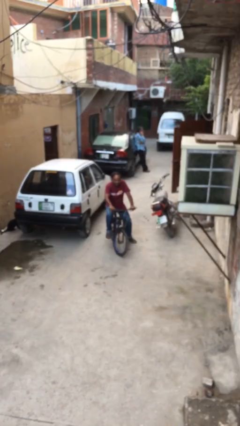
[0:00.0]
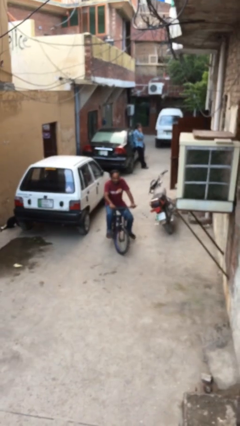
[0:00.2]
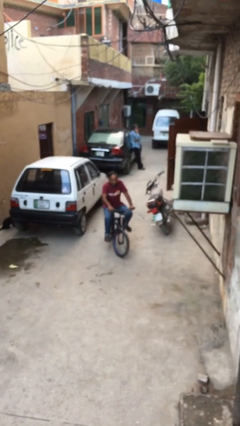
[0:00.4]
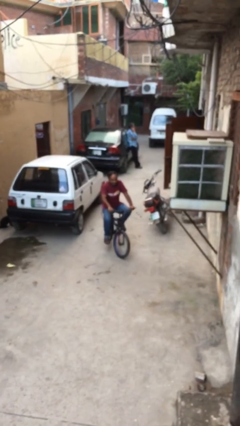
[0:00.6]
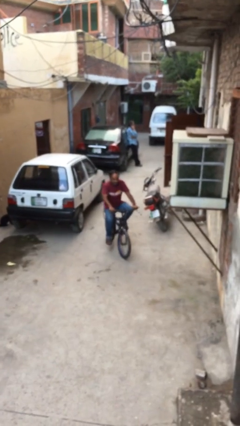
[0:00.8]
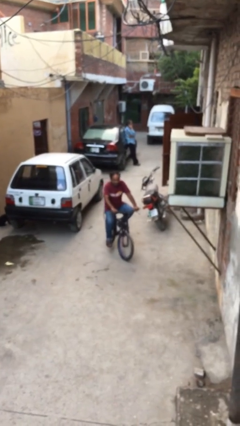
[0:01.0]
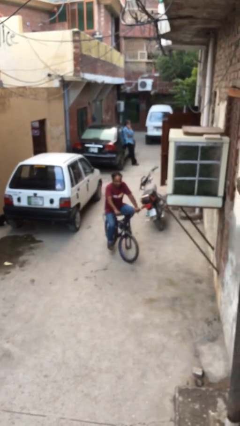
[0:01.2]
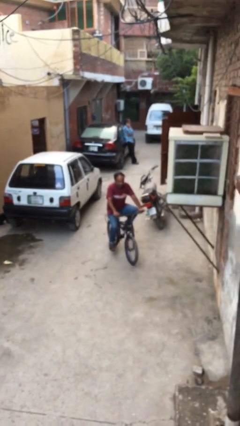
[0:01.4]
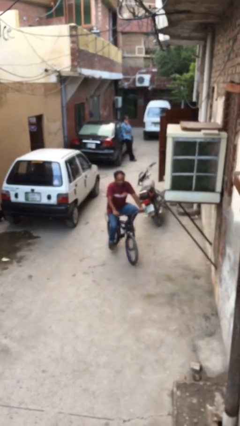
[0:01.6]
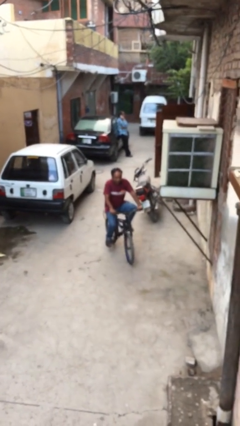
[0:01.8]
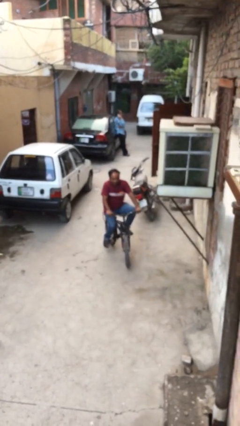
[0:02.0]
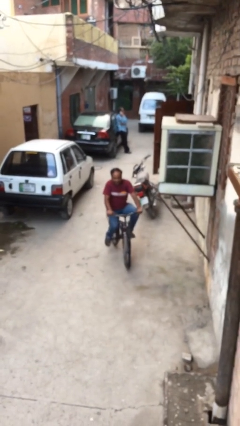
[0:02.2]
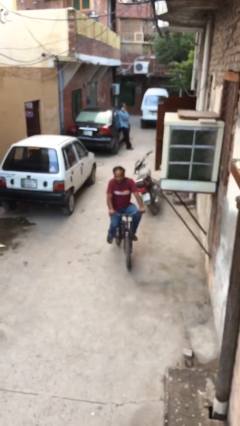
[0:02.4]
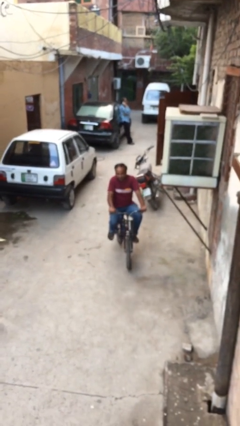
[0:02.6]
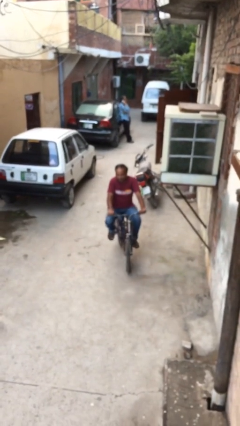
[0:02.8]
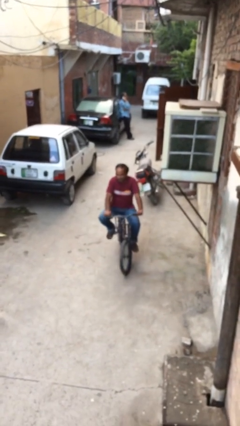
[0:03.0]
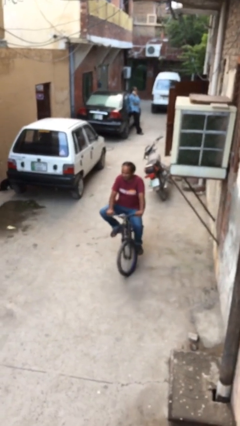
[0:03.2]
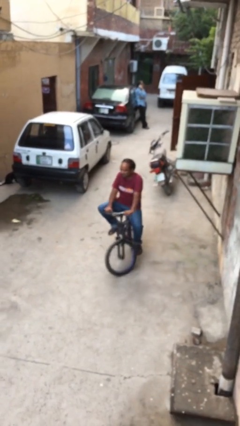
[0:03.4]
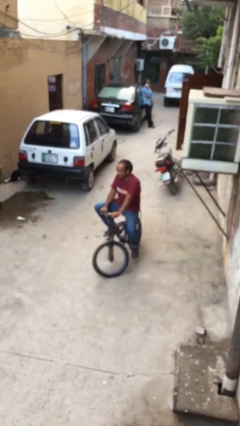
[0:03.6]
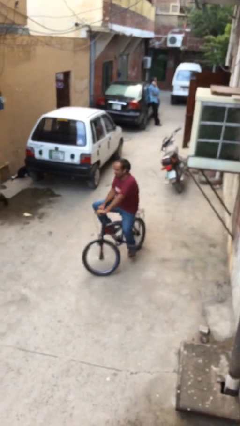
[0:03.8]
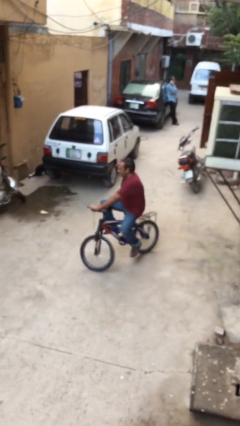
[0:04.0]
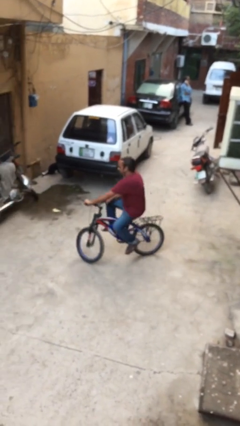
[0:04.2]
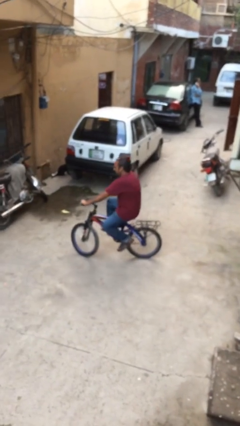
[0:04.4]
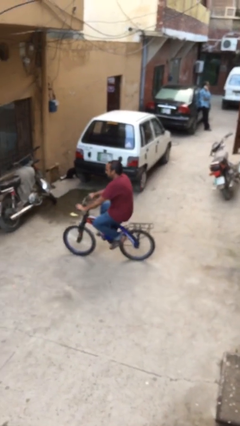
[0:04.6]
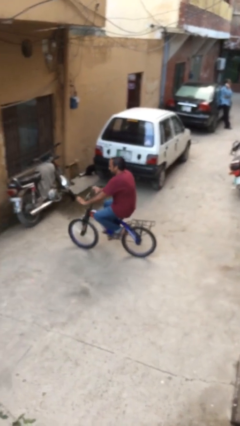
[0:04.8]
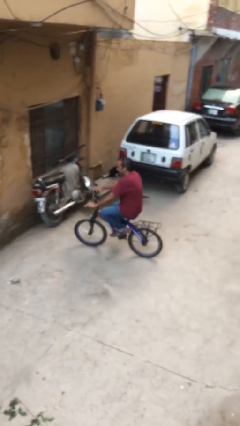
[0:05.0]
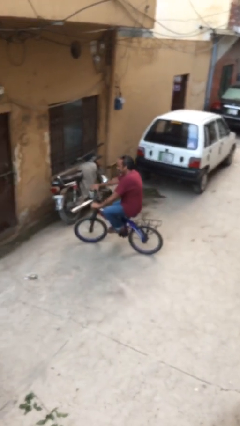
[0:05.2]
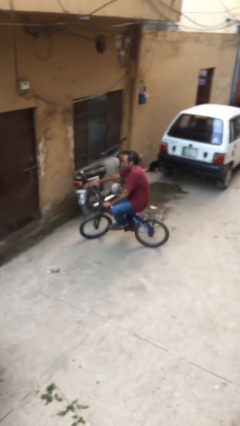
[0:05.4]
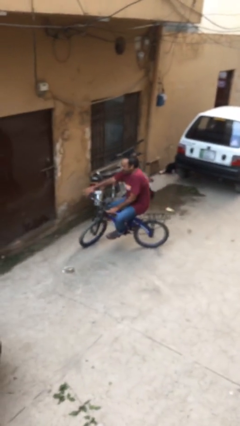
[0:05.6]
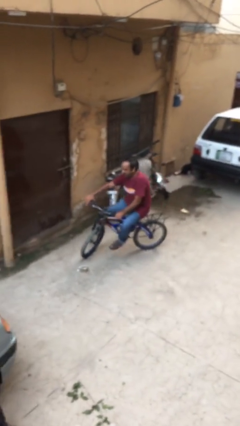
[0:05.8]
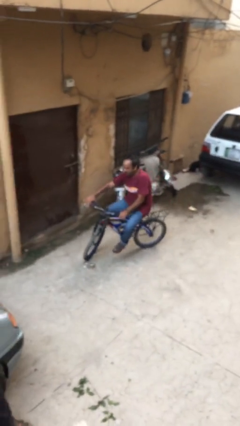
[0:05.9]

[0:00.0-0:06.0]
person rides bicycle

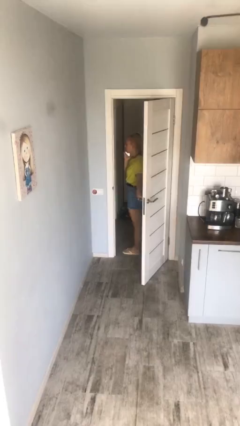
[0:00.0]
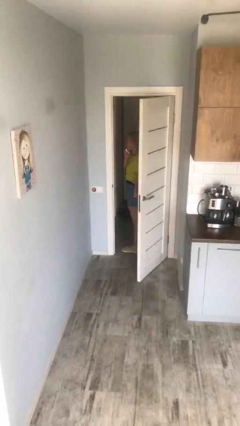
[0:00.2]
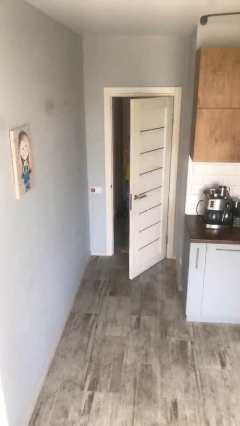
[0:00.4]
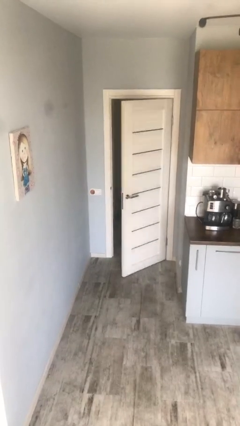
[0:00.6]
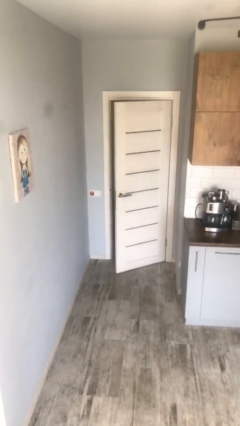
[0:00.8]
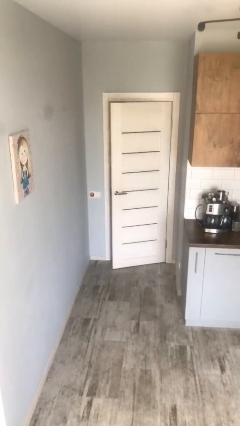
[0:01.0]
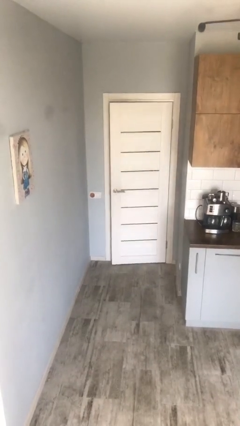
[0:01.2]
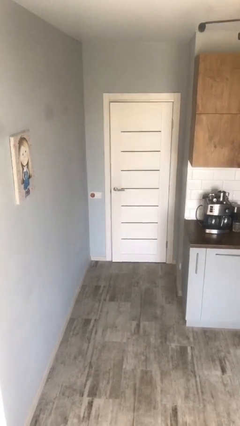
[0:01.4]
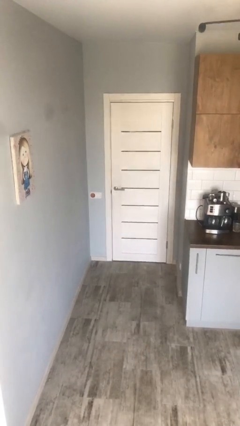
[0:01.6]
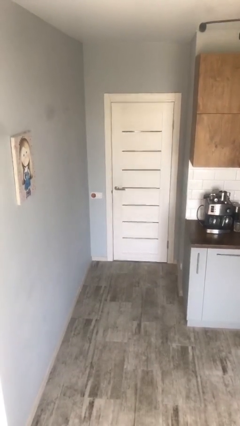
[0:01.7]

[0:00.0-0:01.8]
person closes facility door

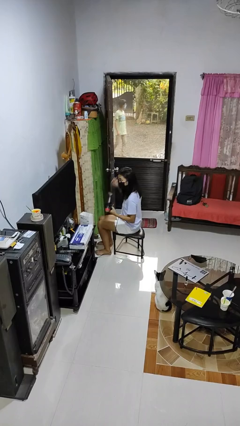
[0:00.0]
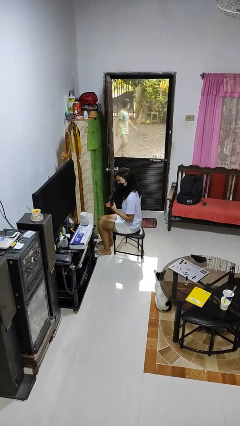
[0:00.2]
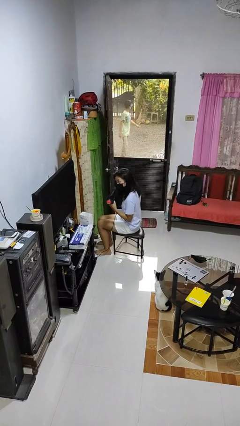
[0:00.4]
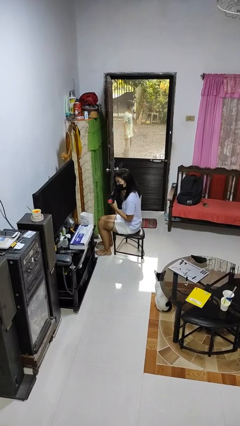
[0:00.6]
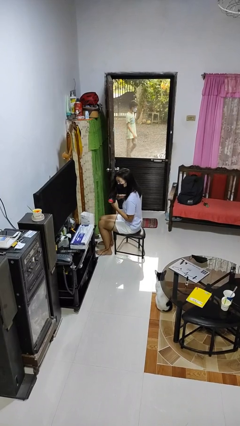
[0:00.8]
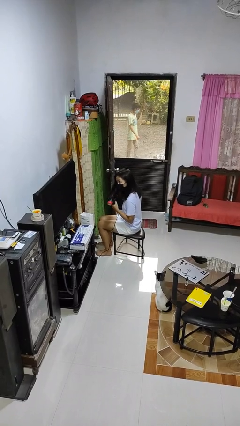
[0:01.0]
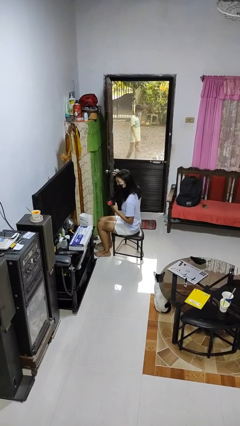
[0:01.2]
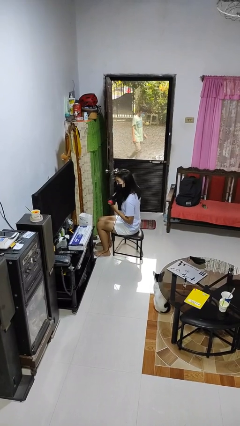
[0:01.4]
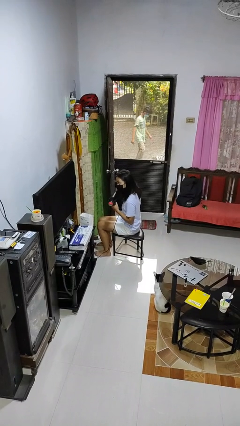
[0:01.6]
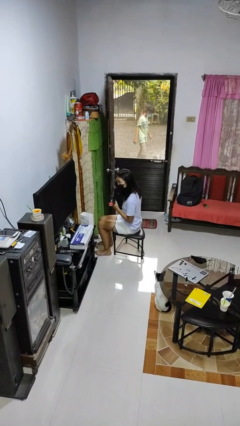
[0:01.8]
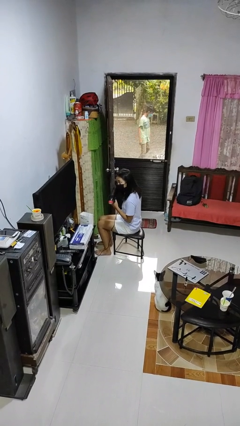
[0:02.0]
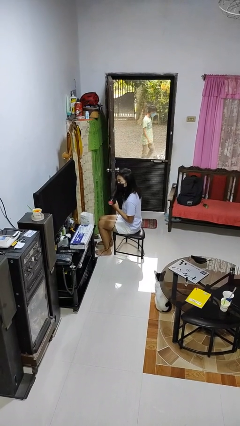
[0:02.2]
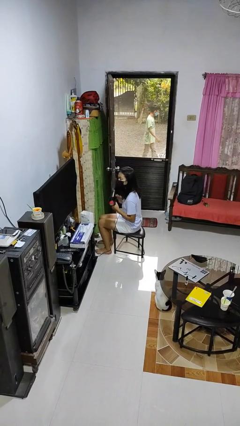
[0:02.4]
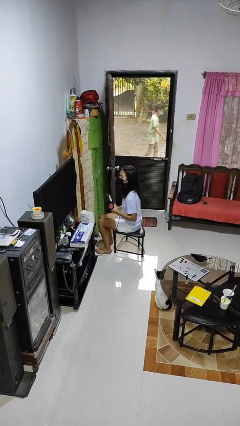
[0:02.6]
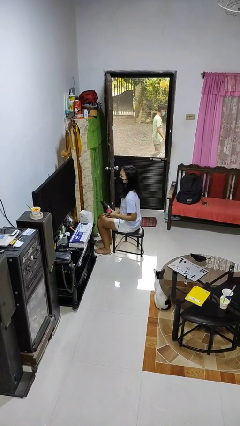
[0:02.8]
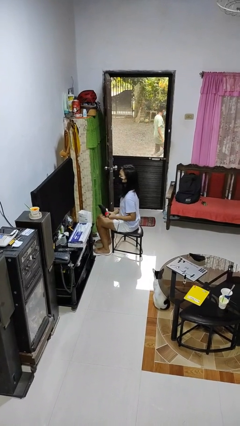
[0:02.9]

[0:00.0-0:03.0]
person dries hair with hairdryer

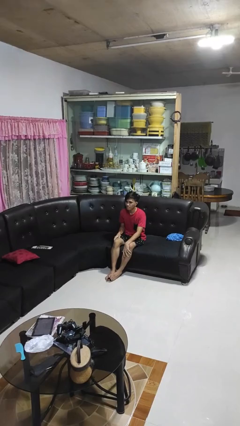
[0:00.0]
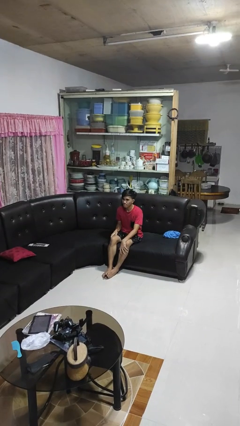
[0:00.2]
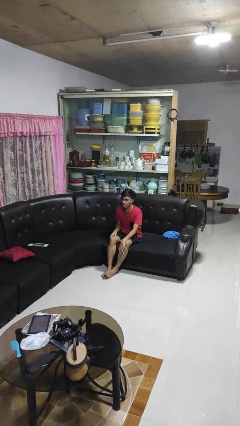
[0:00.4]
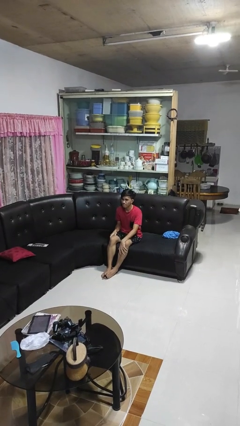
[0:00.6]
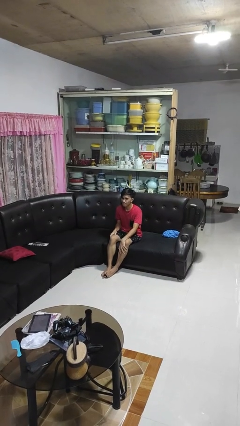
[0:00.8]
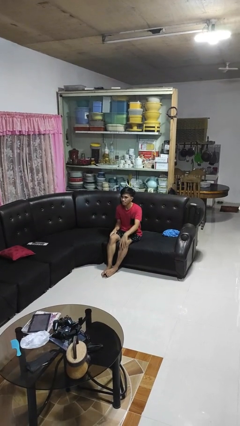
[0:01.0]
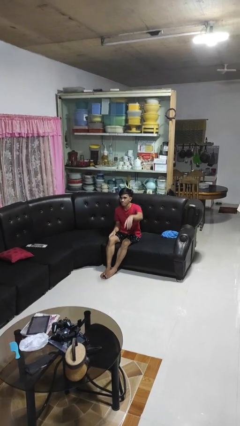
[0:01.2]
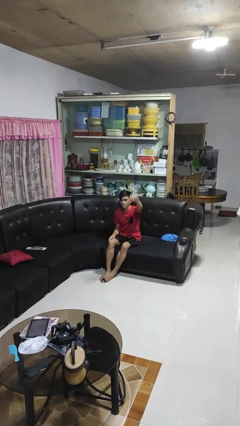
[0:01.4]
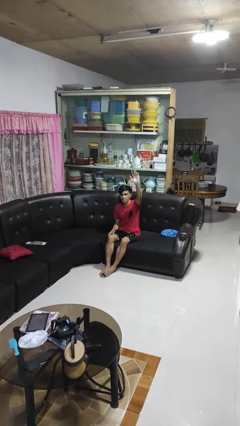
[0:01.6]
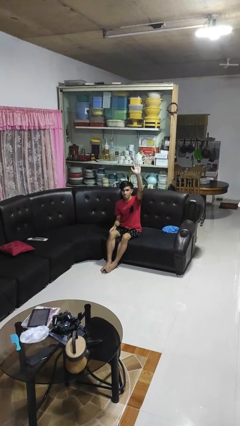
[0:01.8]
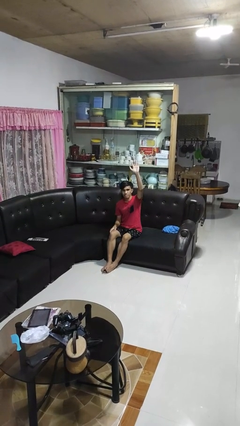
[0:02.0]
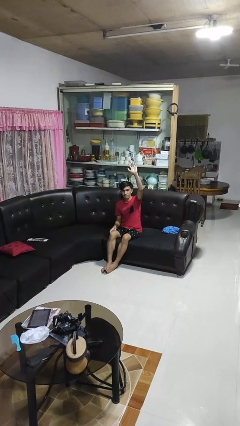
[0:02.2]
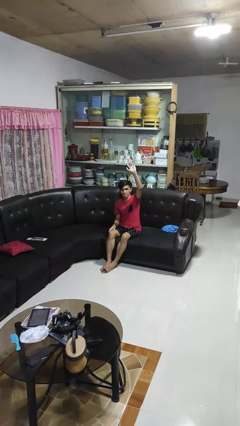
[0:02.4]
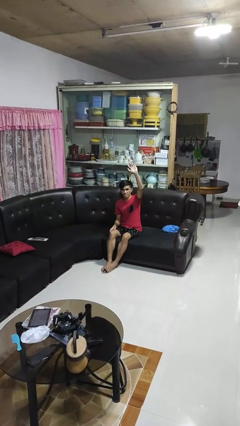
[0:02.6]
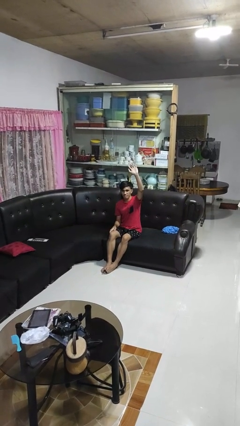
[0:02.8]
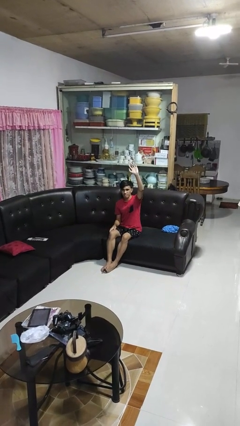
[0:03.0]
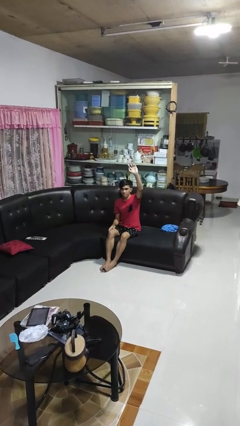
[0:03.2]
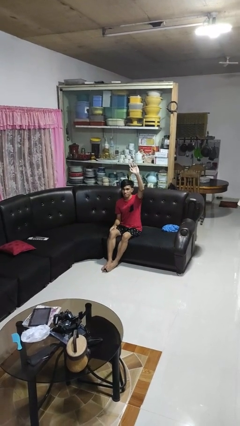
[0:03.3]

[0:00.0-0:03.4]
person gestures raise hand

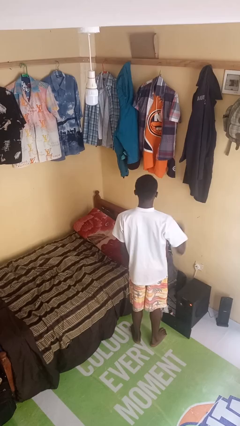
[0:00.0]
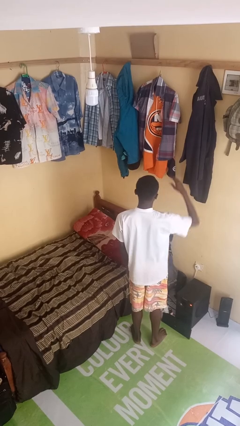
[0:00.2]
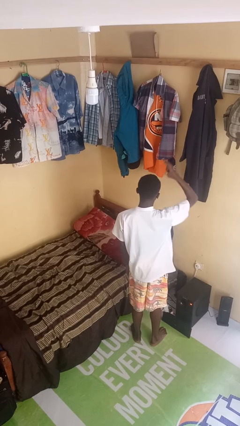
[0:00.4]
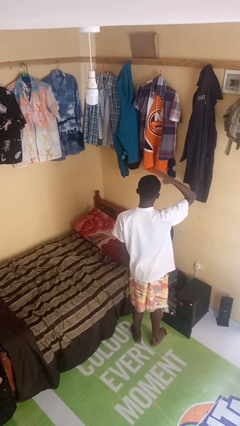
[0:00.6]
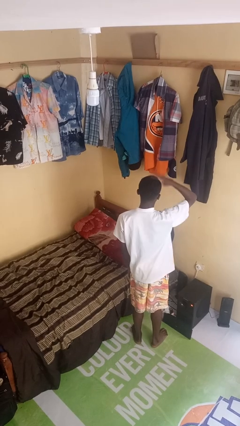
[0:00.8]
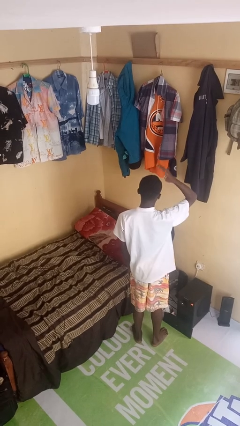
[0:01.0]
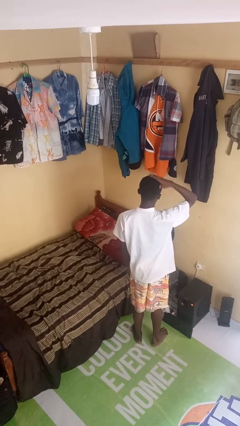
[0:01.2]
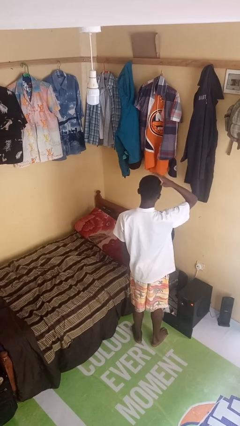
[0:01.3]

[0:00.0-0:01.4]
person pats head

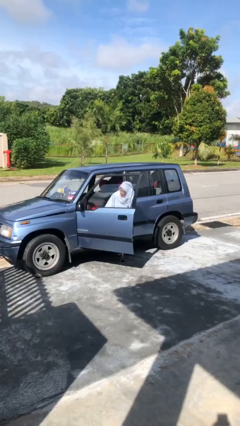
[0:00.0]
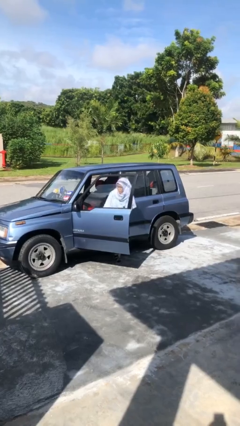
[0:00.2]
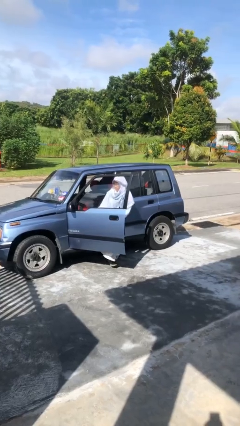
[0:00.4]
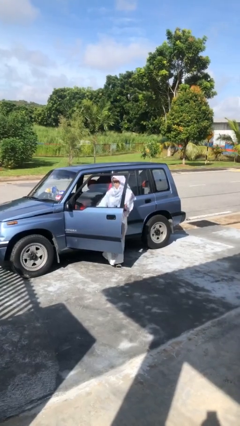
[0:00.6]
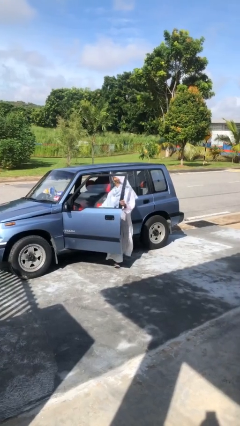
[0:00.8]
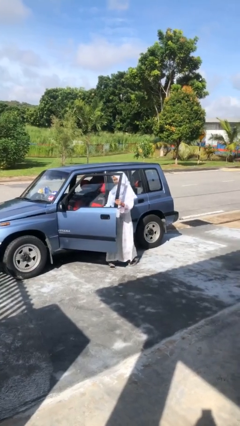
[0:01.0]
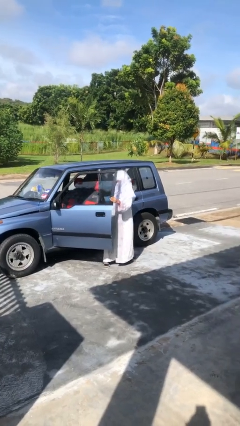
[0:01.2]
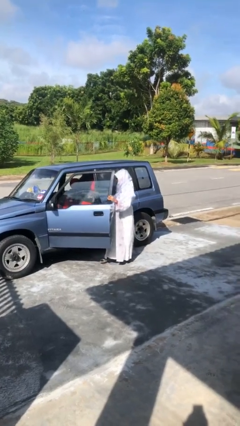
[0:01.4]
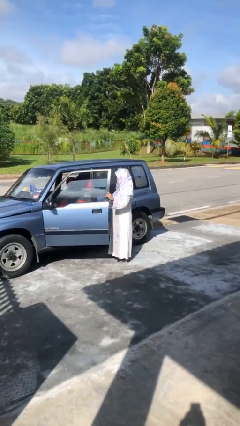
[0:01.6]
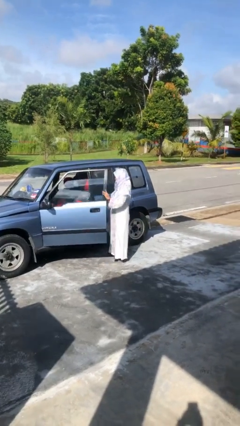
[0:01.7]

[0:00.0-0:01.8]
person exits car
